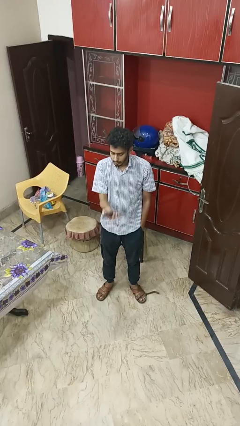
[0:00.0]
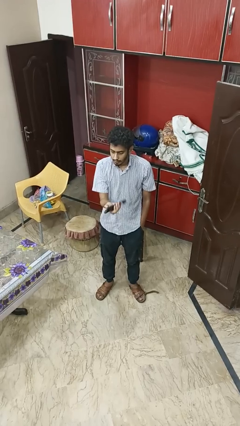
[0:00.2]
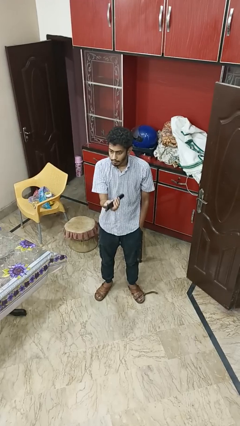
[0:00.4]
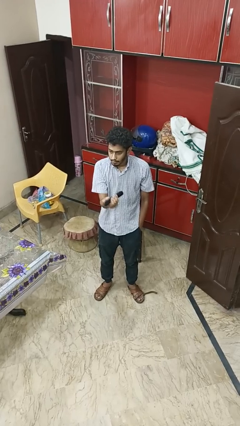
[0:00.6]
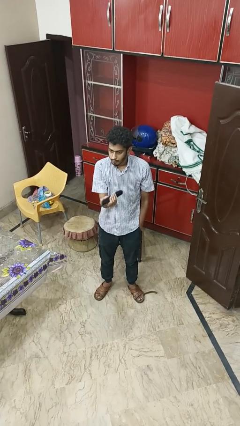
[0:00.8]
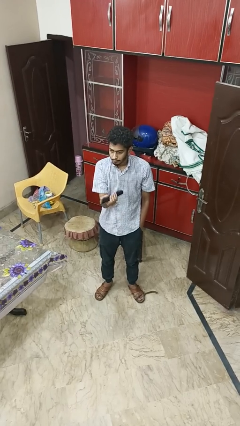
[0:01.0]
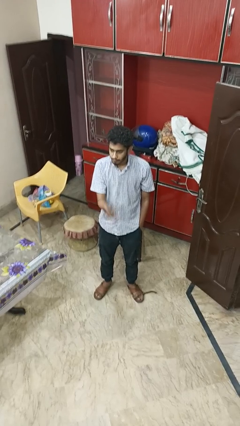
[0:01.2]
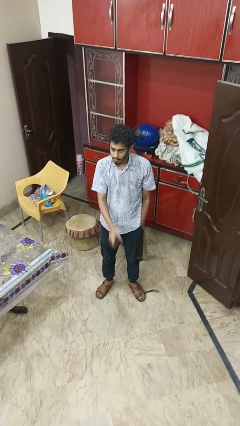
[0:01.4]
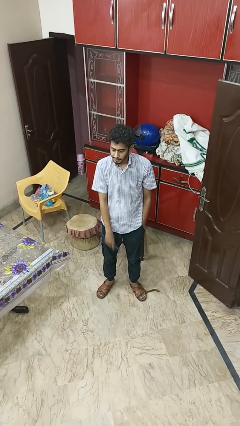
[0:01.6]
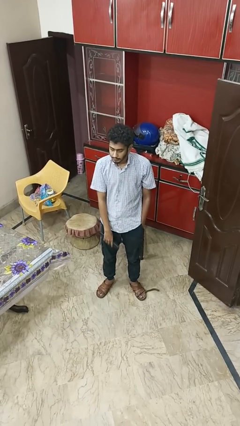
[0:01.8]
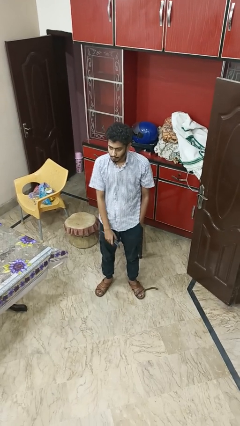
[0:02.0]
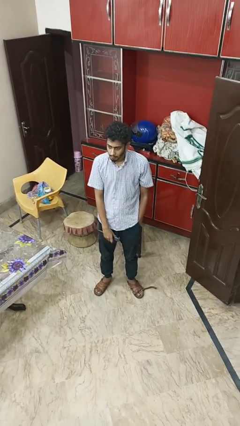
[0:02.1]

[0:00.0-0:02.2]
person uses television remote

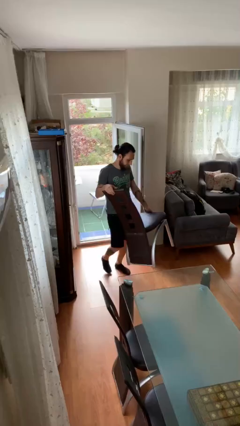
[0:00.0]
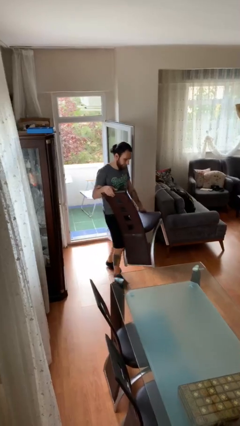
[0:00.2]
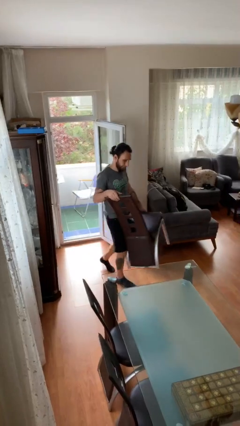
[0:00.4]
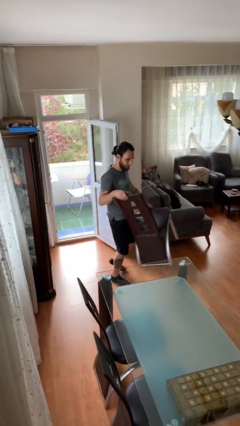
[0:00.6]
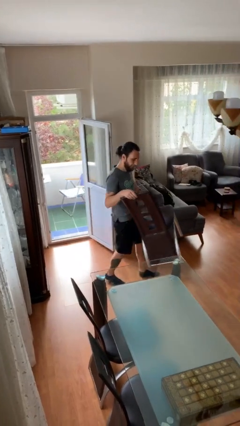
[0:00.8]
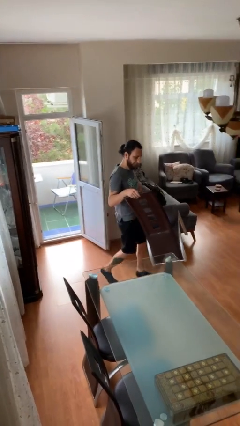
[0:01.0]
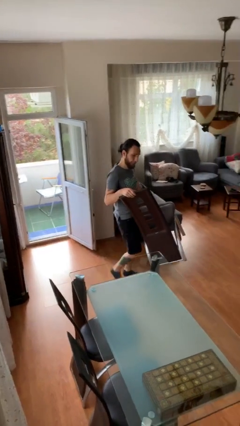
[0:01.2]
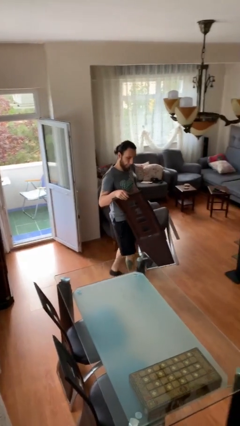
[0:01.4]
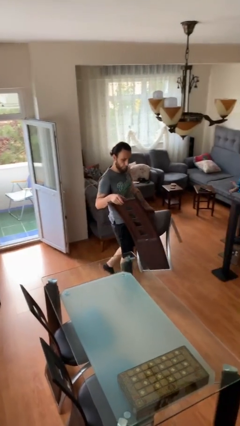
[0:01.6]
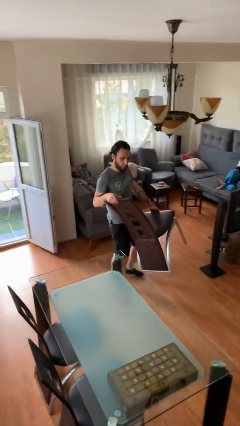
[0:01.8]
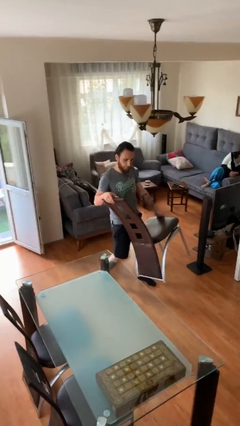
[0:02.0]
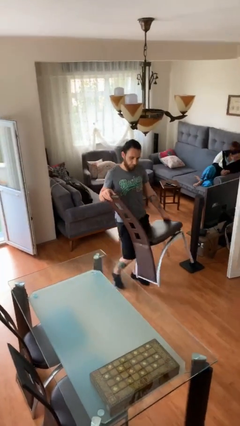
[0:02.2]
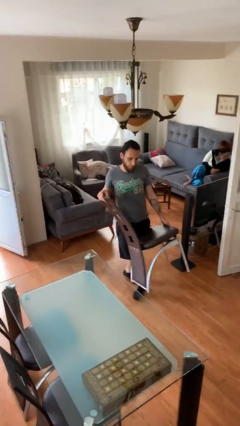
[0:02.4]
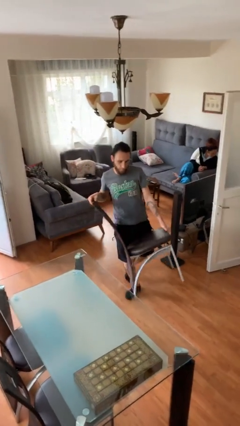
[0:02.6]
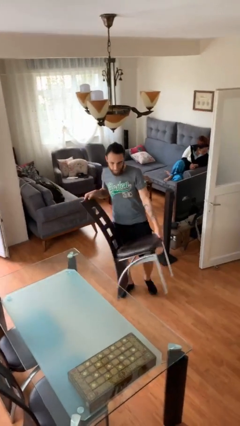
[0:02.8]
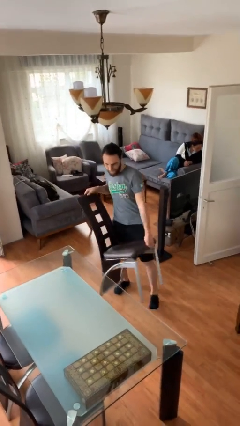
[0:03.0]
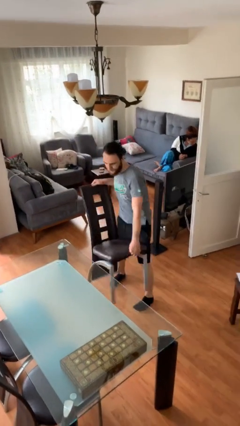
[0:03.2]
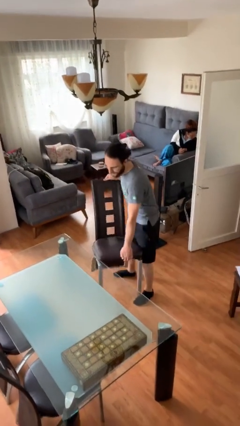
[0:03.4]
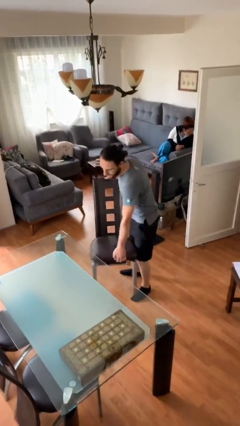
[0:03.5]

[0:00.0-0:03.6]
person carries heavy object

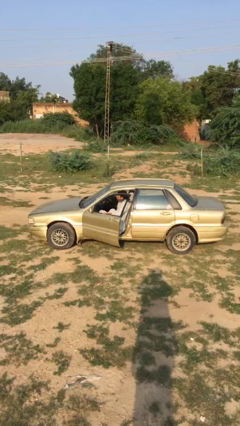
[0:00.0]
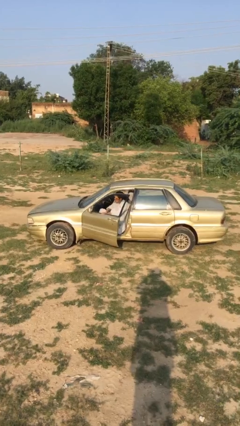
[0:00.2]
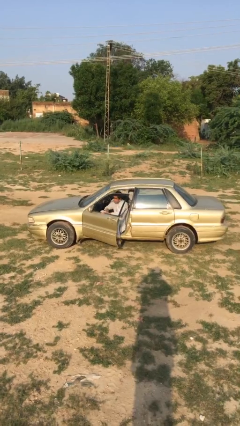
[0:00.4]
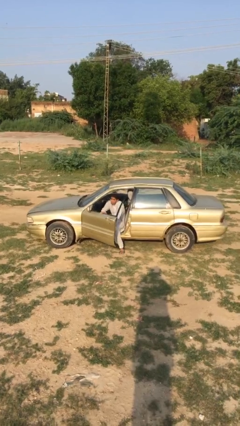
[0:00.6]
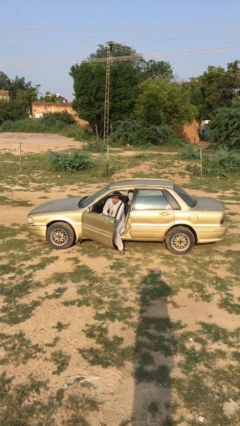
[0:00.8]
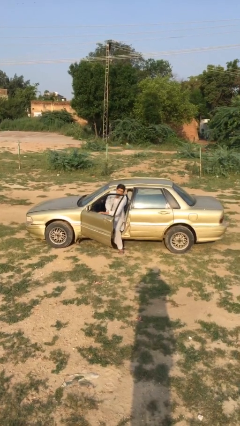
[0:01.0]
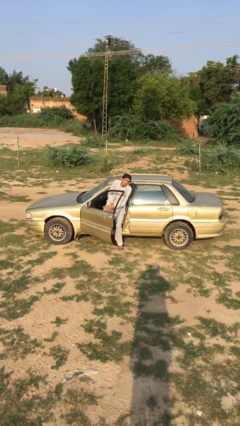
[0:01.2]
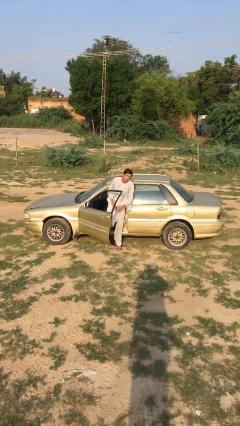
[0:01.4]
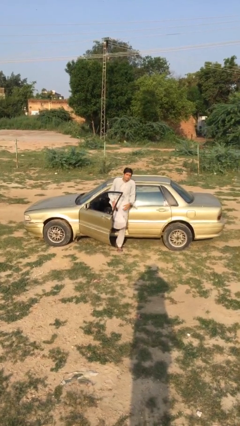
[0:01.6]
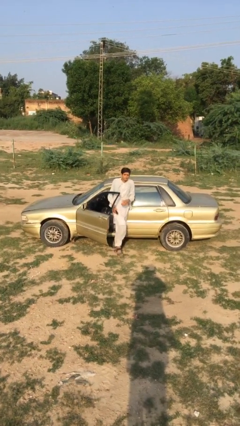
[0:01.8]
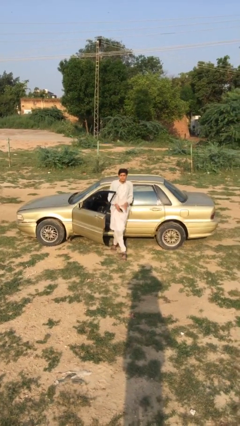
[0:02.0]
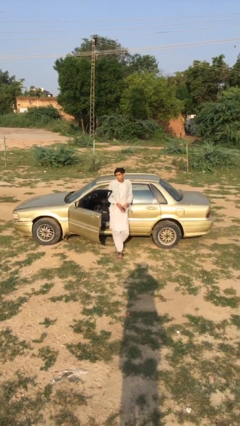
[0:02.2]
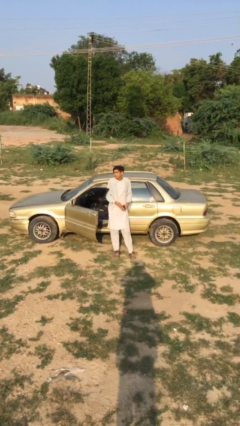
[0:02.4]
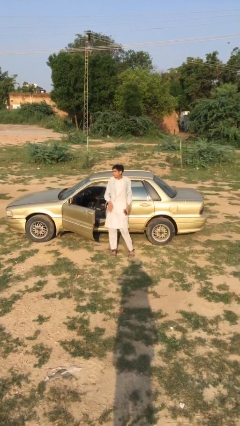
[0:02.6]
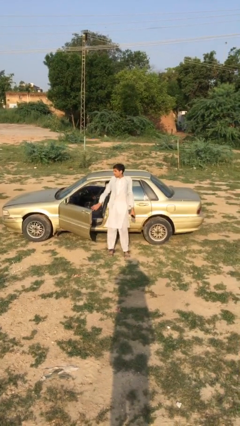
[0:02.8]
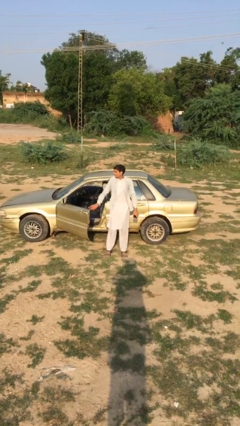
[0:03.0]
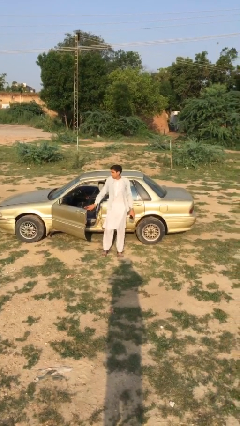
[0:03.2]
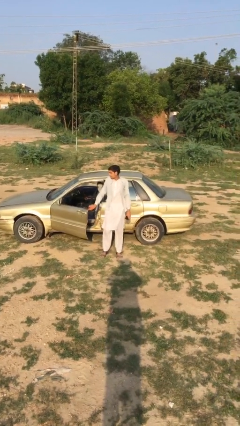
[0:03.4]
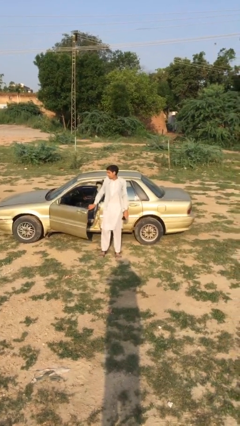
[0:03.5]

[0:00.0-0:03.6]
person exits car

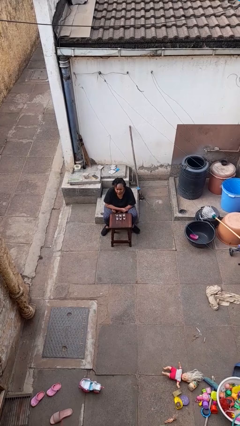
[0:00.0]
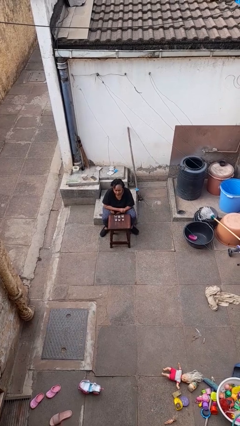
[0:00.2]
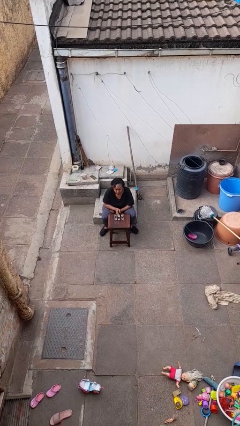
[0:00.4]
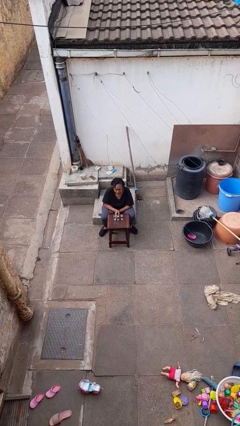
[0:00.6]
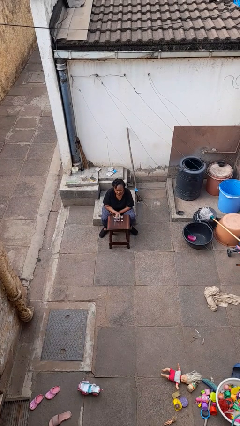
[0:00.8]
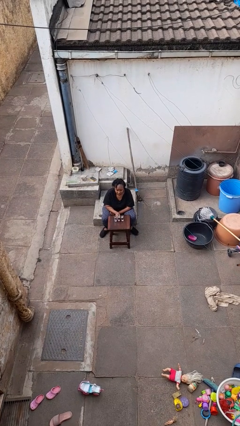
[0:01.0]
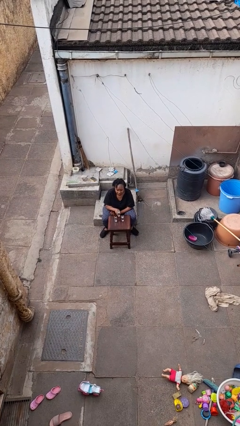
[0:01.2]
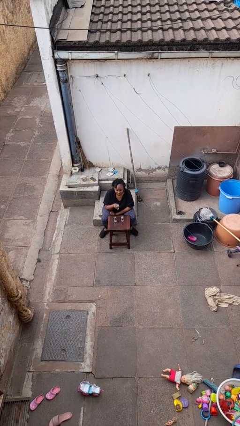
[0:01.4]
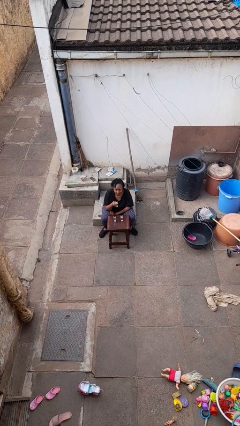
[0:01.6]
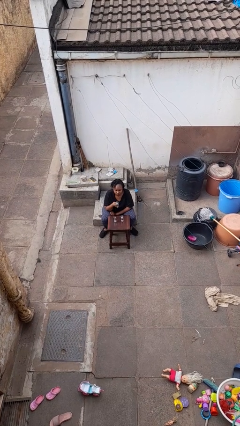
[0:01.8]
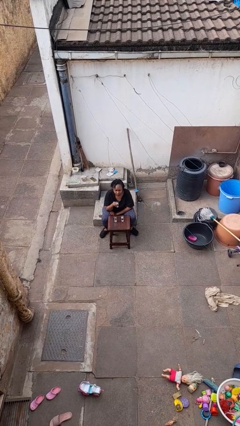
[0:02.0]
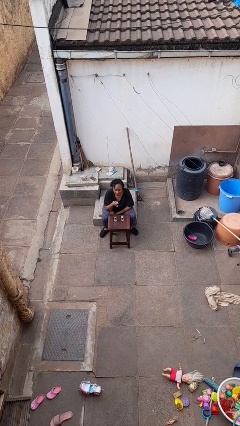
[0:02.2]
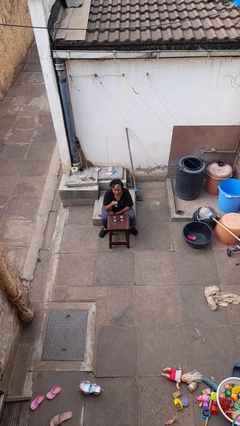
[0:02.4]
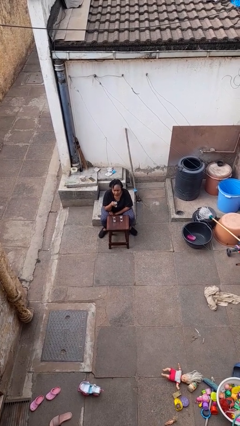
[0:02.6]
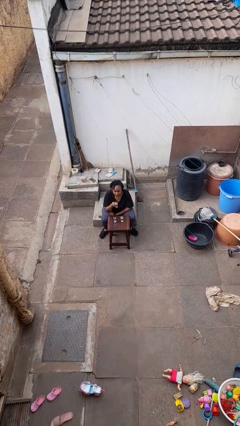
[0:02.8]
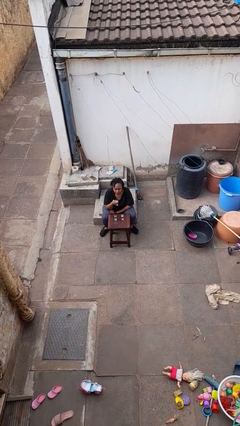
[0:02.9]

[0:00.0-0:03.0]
person picks up object from table

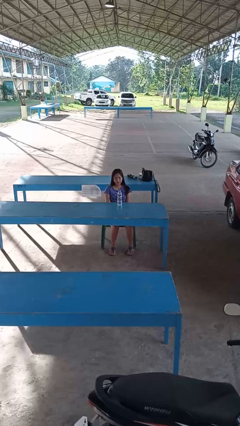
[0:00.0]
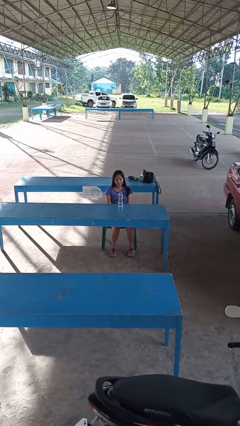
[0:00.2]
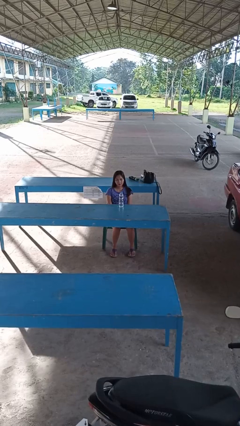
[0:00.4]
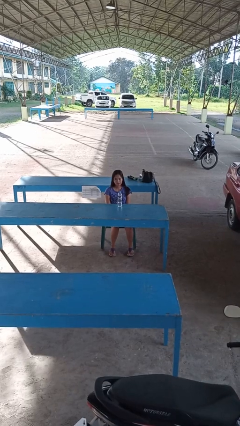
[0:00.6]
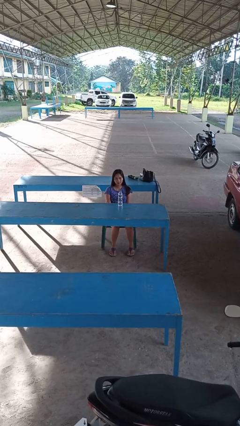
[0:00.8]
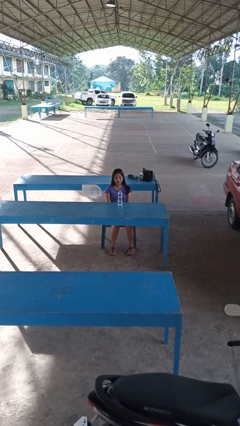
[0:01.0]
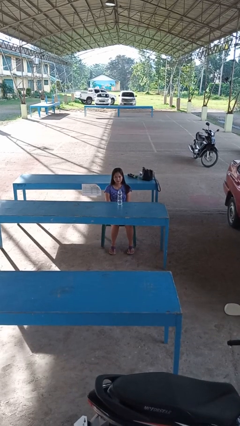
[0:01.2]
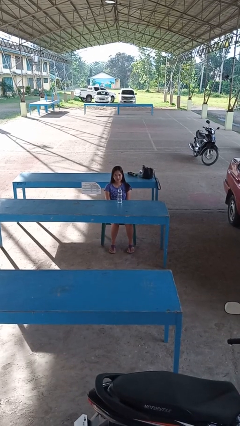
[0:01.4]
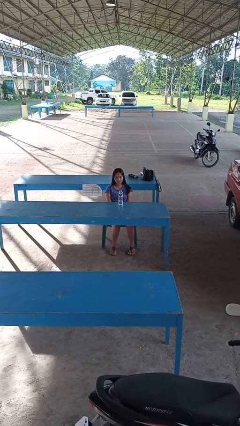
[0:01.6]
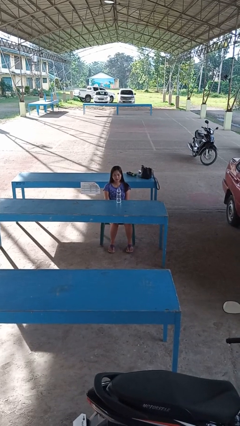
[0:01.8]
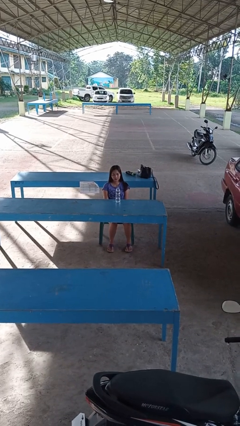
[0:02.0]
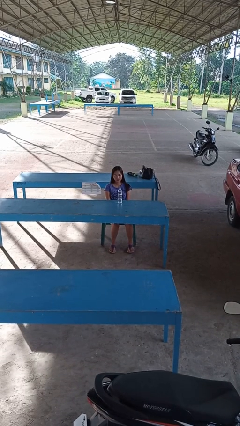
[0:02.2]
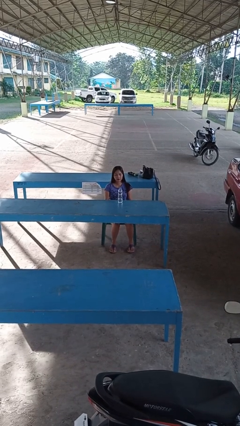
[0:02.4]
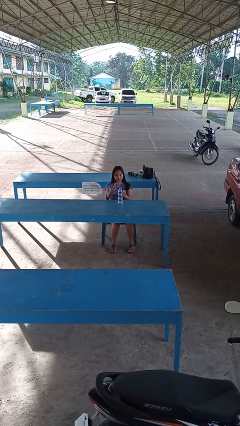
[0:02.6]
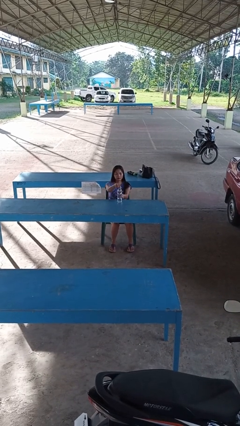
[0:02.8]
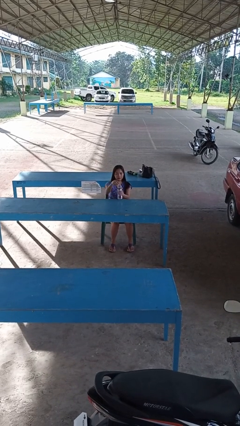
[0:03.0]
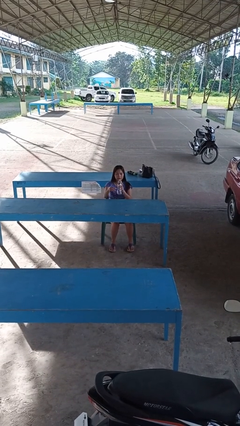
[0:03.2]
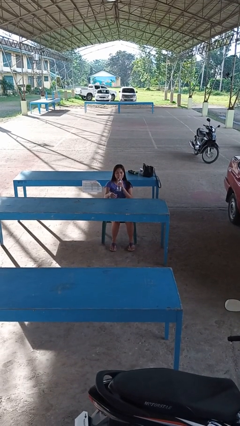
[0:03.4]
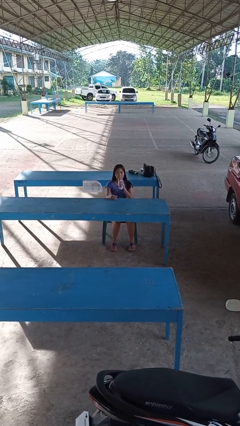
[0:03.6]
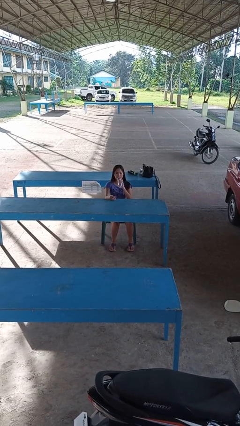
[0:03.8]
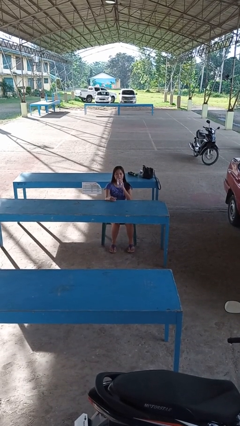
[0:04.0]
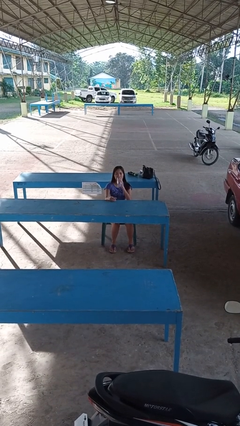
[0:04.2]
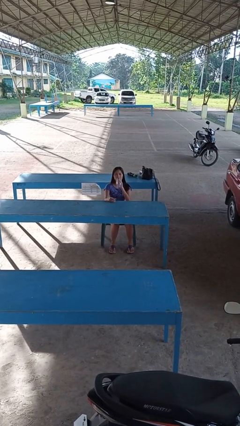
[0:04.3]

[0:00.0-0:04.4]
person drinks from bottle

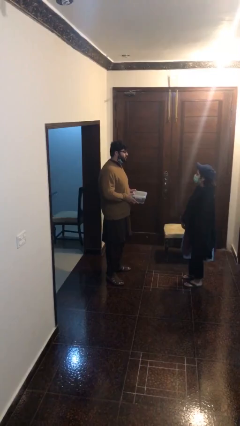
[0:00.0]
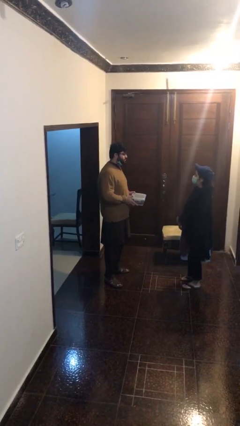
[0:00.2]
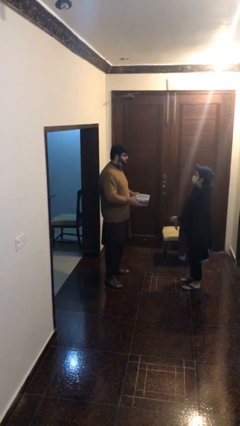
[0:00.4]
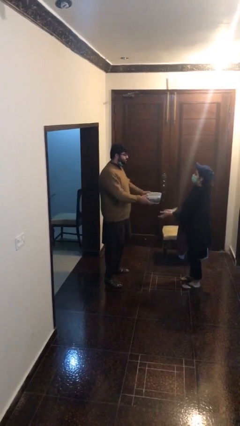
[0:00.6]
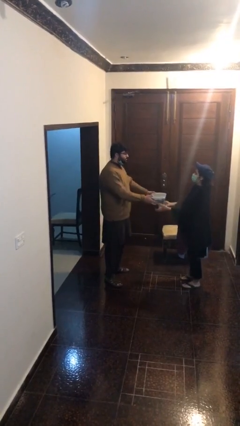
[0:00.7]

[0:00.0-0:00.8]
person transfers object to person

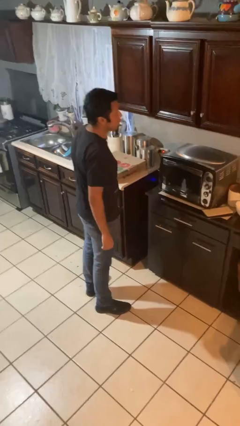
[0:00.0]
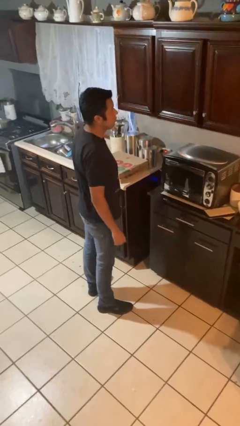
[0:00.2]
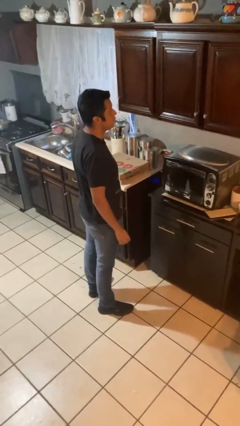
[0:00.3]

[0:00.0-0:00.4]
person closes cabinet
